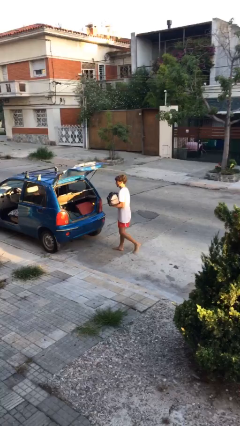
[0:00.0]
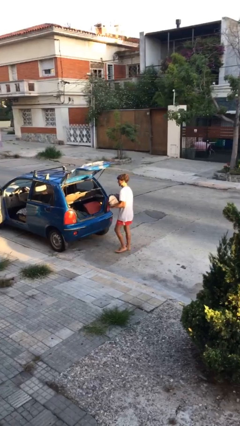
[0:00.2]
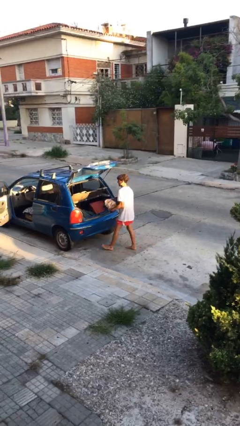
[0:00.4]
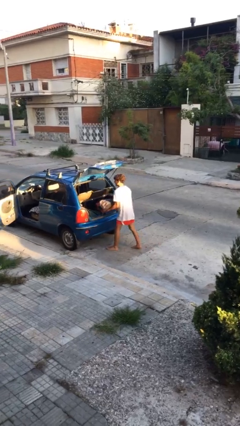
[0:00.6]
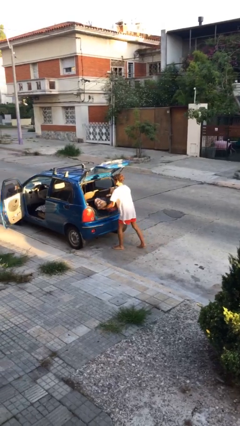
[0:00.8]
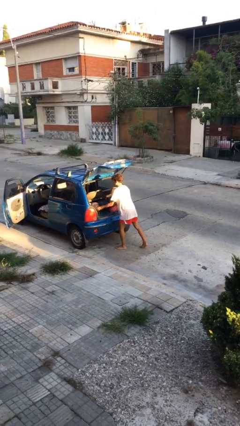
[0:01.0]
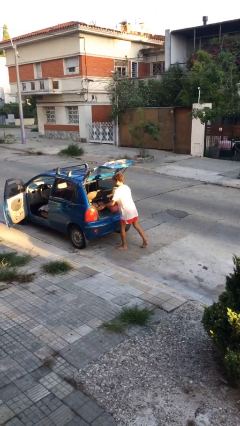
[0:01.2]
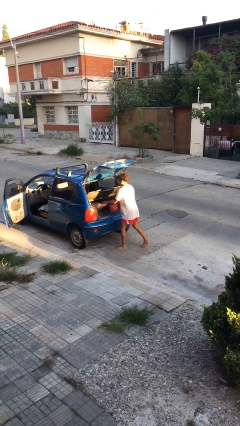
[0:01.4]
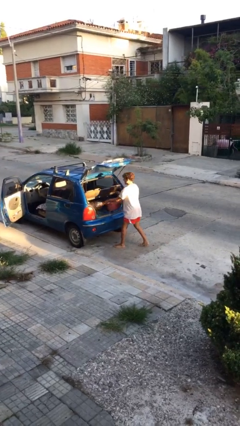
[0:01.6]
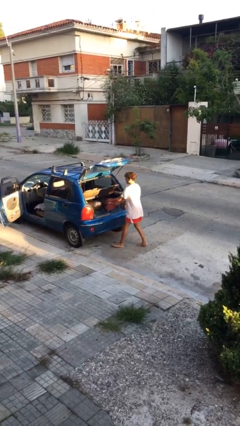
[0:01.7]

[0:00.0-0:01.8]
person loads car

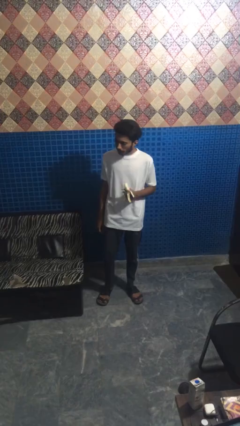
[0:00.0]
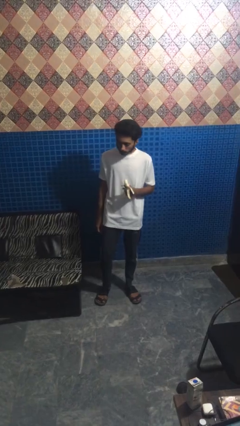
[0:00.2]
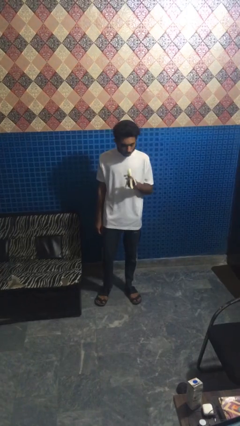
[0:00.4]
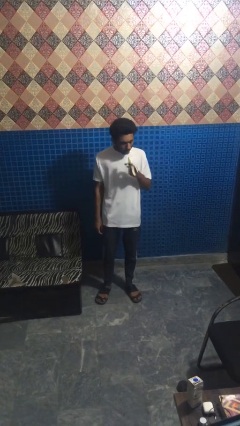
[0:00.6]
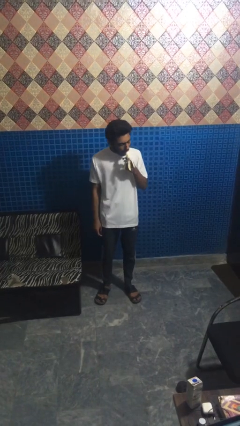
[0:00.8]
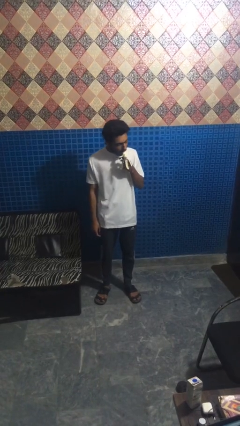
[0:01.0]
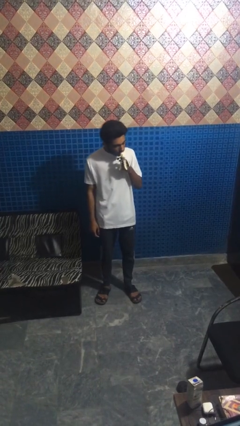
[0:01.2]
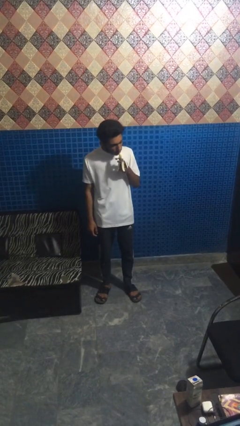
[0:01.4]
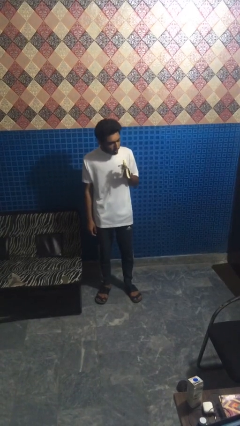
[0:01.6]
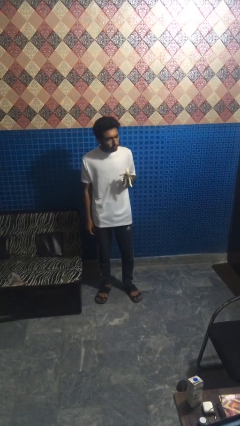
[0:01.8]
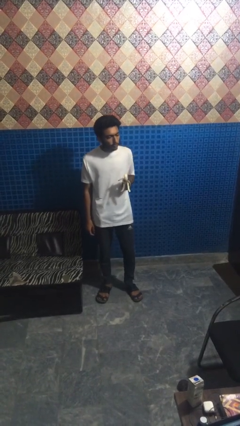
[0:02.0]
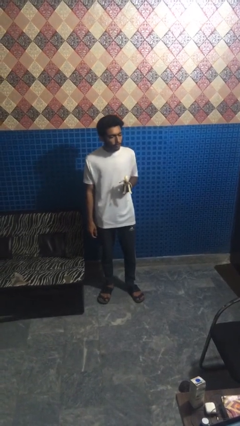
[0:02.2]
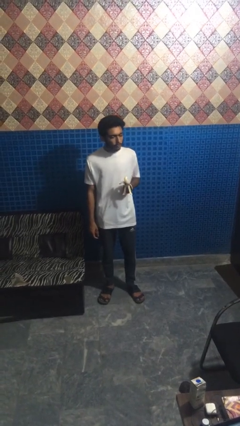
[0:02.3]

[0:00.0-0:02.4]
person eats banana

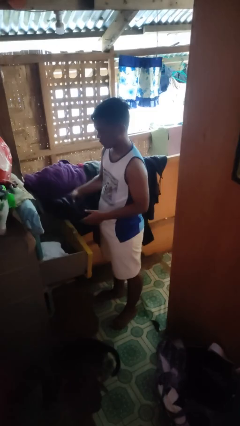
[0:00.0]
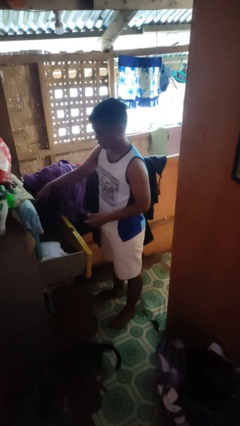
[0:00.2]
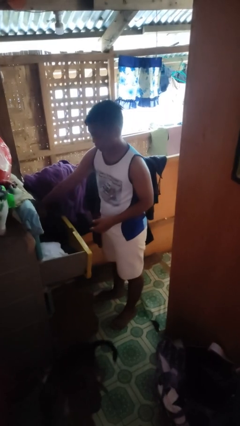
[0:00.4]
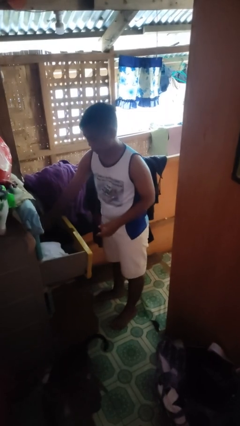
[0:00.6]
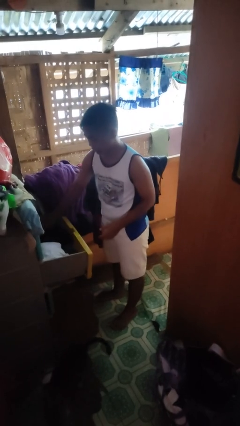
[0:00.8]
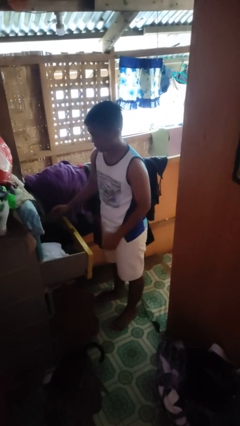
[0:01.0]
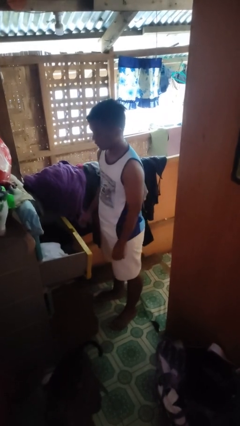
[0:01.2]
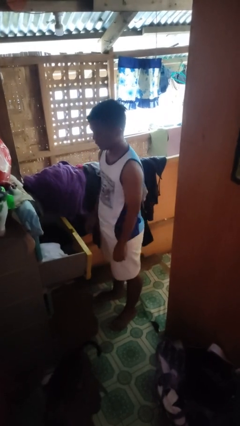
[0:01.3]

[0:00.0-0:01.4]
person puts clothes into dresser

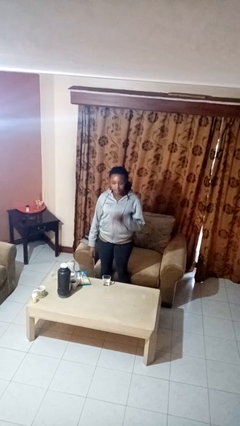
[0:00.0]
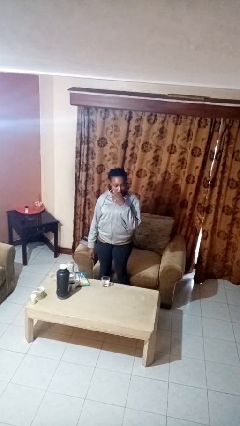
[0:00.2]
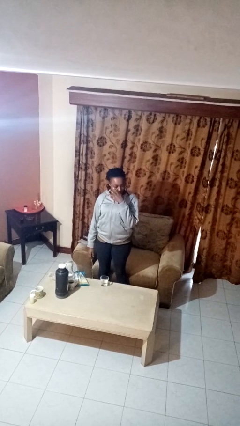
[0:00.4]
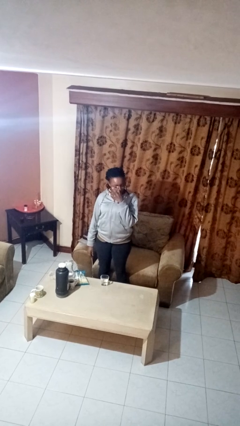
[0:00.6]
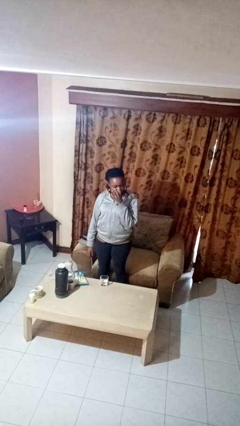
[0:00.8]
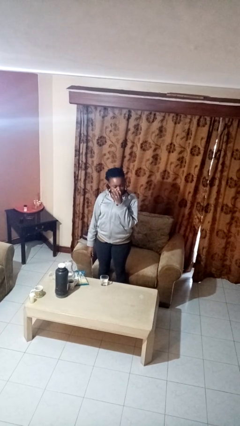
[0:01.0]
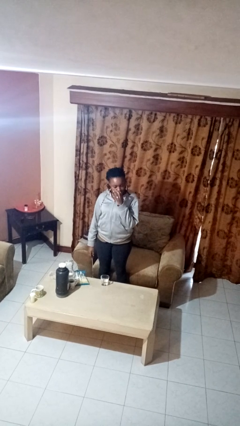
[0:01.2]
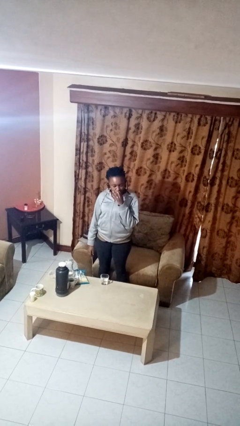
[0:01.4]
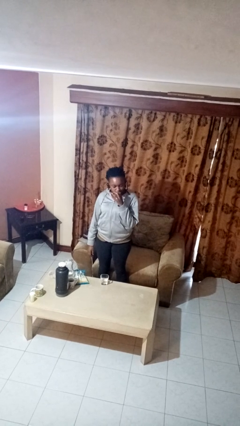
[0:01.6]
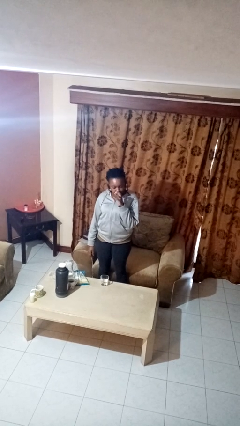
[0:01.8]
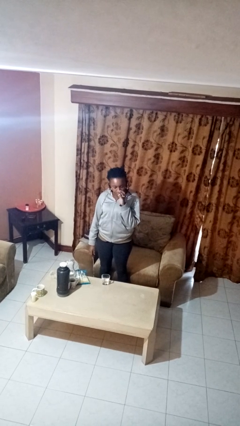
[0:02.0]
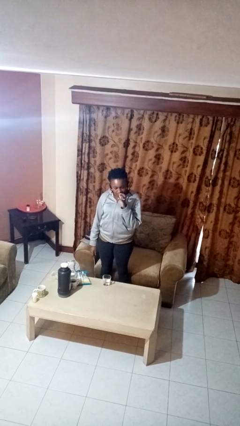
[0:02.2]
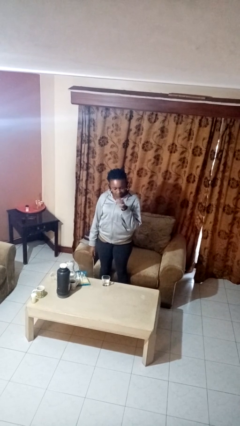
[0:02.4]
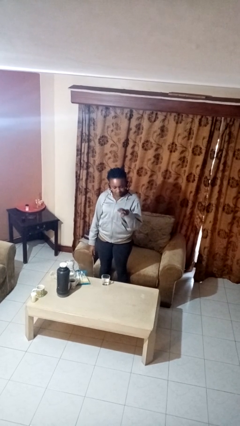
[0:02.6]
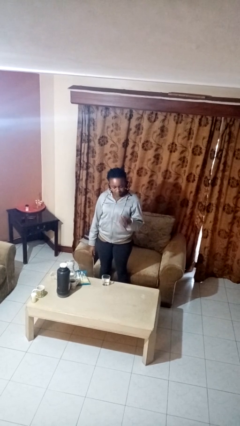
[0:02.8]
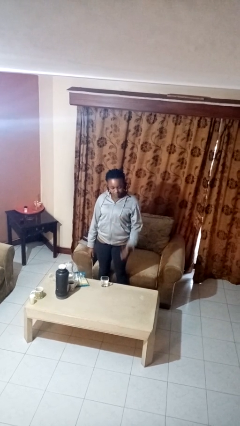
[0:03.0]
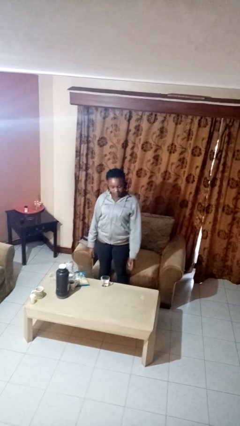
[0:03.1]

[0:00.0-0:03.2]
person licks fingers

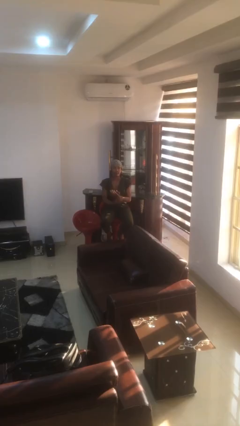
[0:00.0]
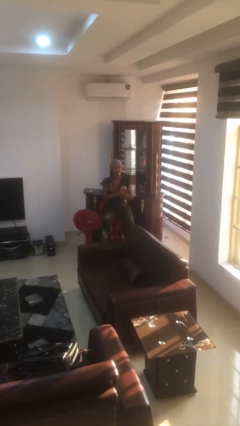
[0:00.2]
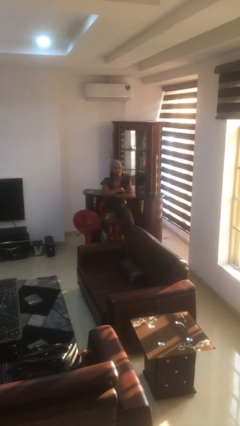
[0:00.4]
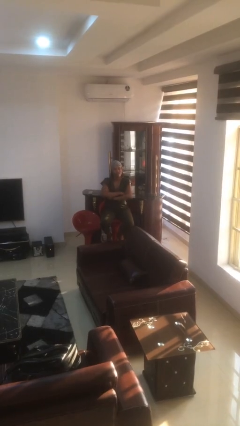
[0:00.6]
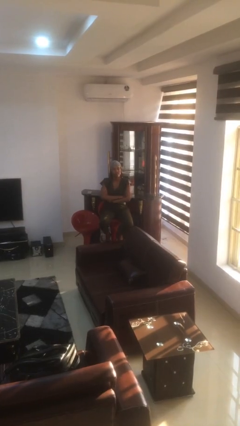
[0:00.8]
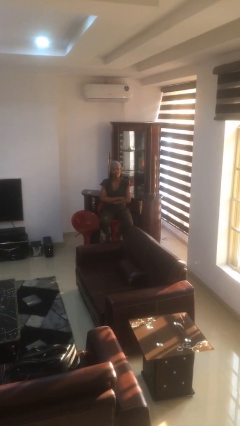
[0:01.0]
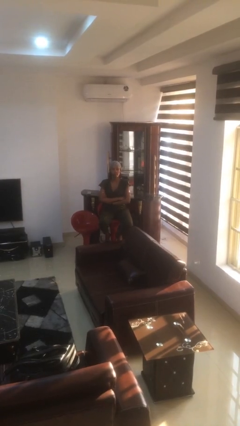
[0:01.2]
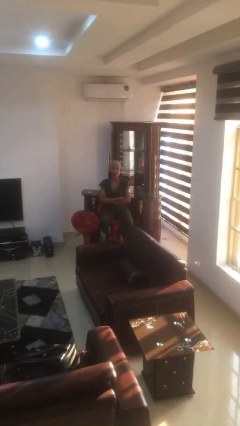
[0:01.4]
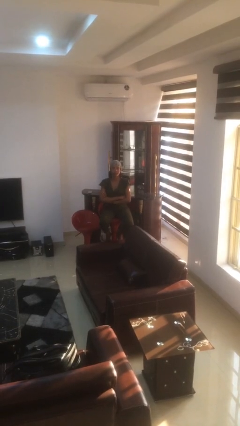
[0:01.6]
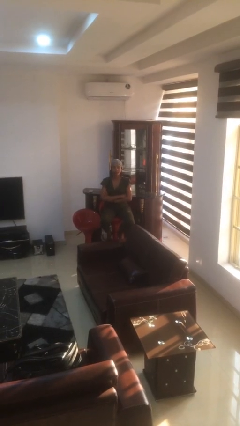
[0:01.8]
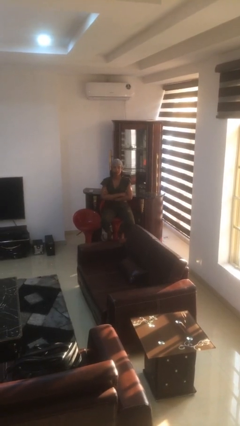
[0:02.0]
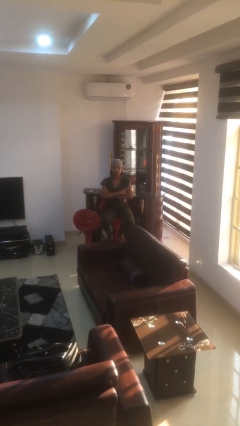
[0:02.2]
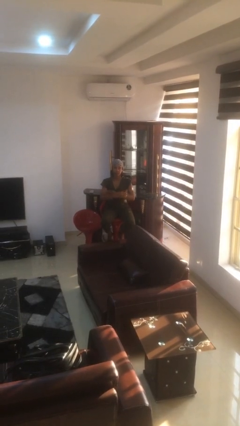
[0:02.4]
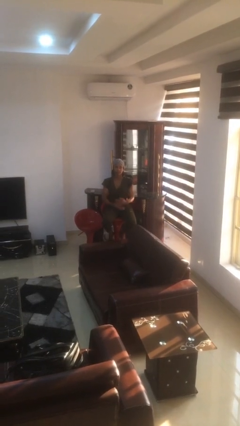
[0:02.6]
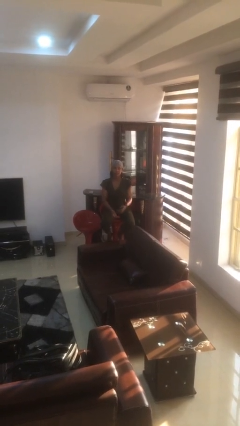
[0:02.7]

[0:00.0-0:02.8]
person crosses arms

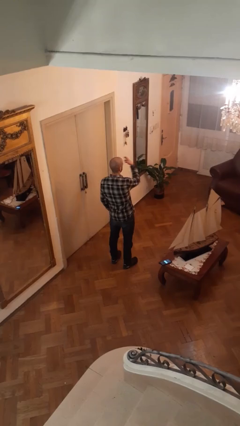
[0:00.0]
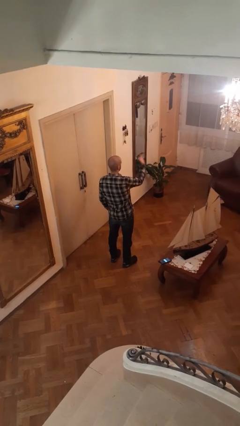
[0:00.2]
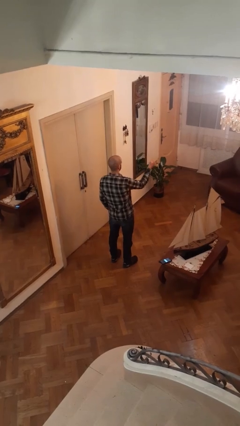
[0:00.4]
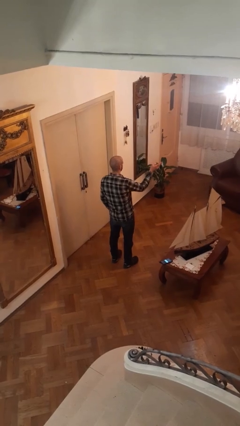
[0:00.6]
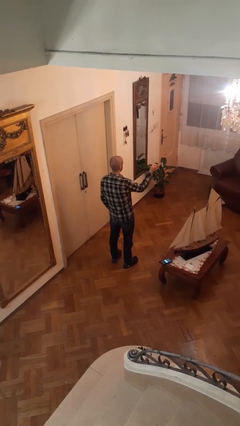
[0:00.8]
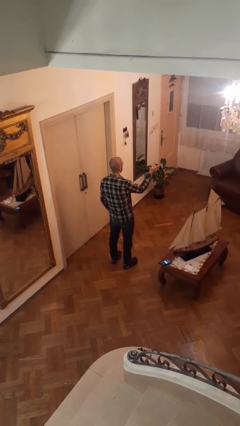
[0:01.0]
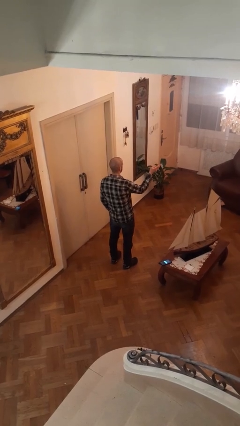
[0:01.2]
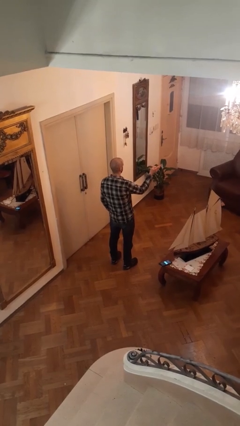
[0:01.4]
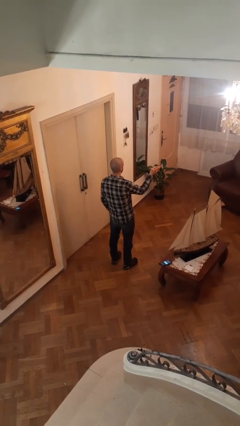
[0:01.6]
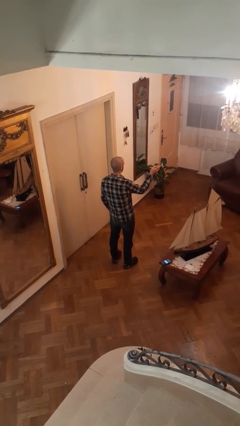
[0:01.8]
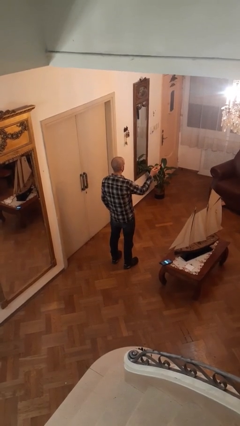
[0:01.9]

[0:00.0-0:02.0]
person gestures swipe right

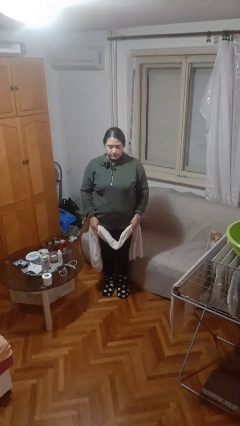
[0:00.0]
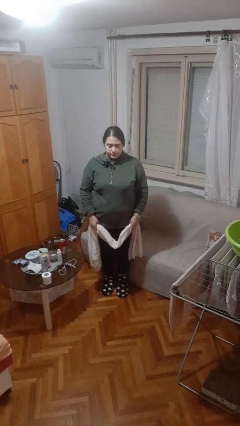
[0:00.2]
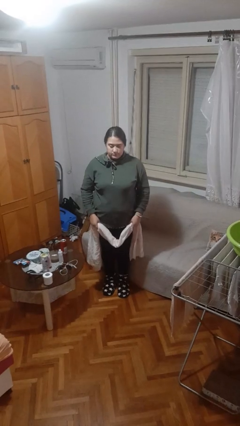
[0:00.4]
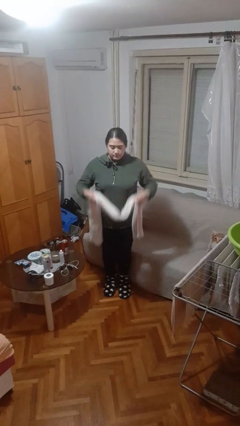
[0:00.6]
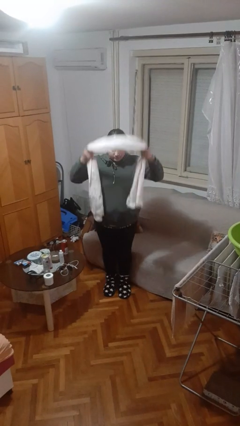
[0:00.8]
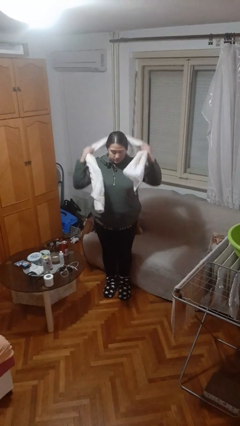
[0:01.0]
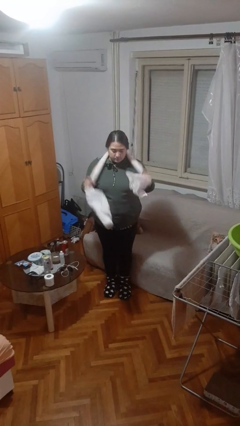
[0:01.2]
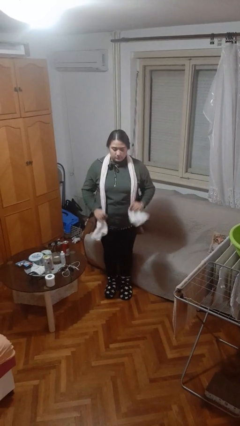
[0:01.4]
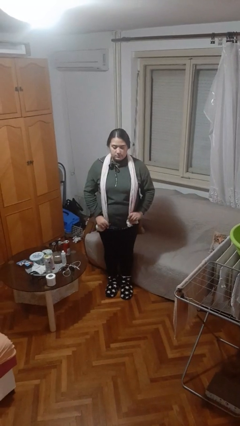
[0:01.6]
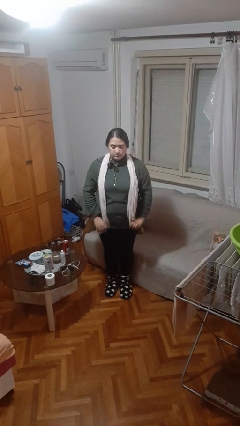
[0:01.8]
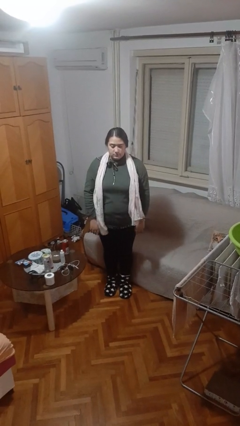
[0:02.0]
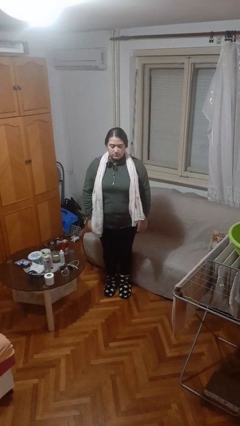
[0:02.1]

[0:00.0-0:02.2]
person puts on scarf

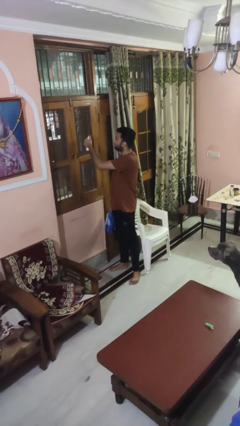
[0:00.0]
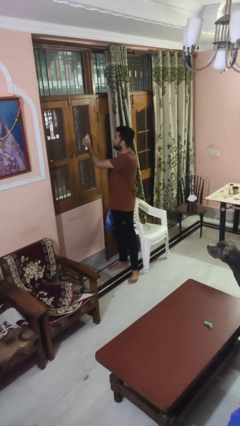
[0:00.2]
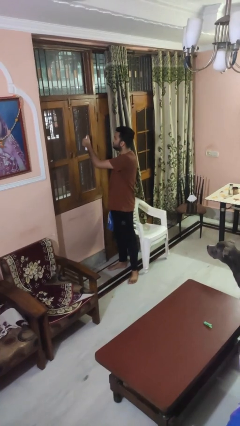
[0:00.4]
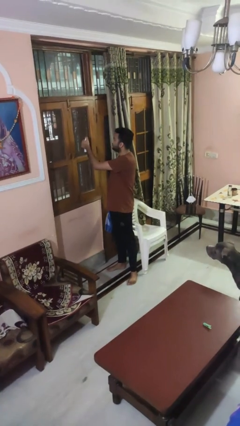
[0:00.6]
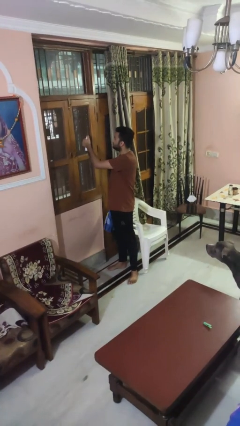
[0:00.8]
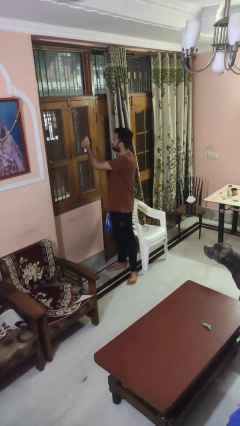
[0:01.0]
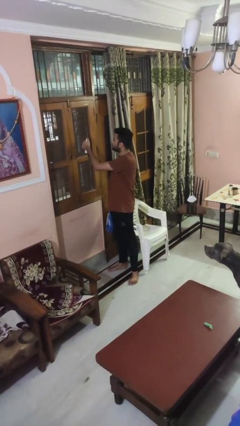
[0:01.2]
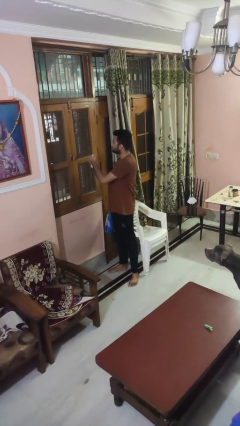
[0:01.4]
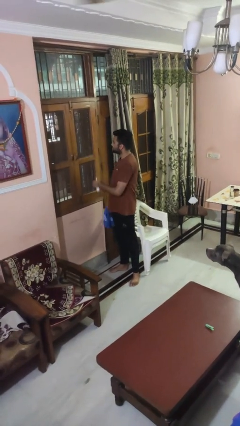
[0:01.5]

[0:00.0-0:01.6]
person sprays from bottle
